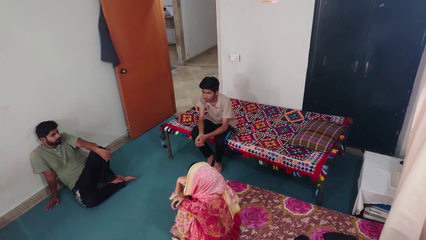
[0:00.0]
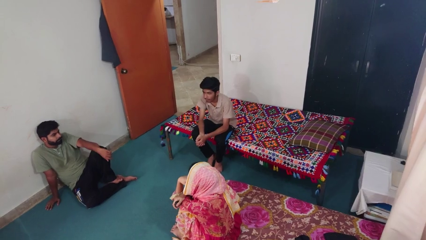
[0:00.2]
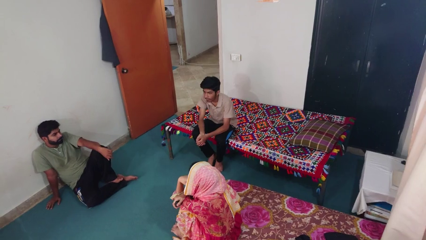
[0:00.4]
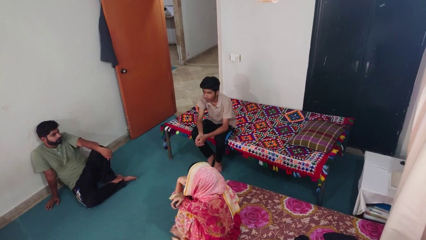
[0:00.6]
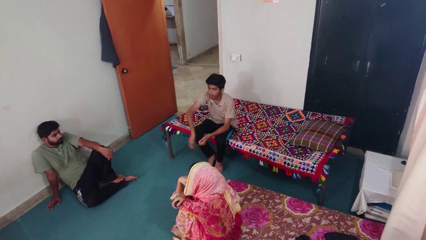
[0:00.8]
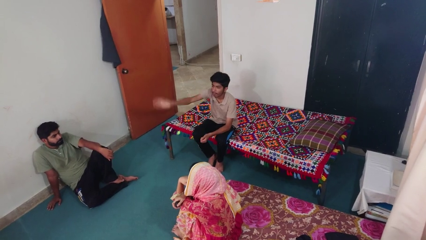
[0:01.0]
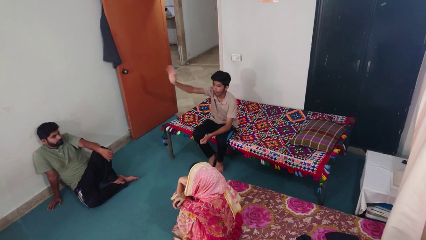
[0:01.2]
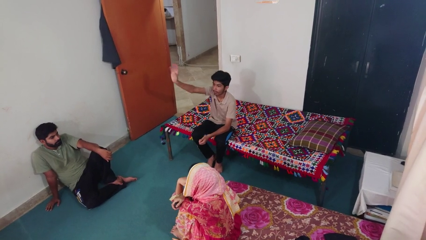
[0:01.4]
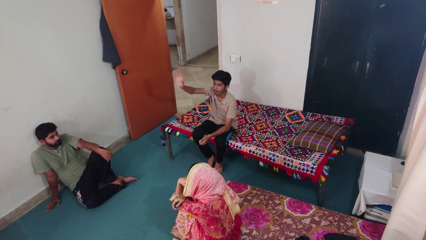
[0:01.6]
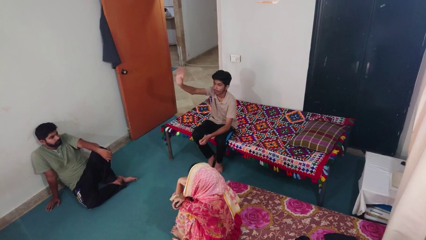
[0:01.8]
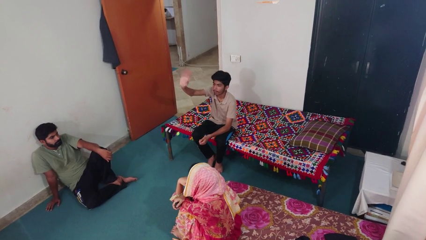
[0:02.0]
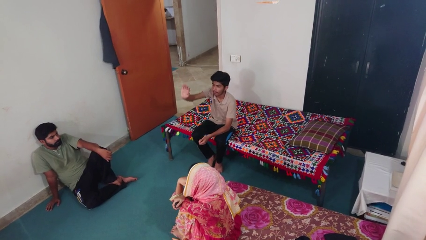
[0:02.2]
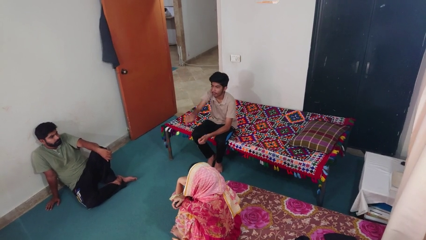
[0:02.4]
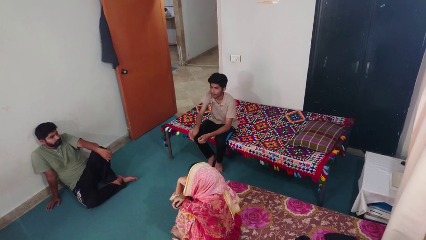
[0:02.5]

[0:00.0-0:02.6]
person waves at person

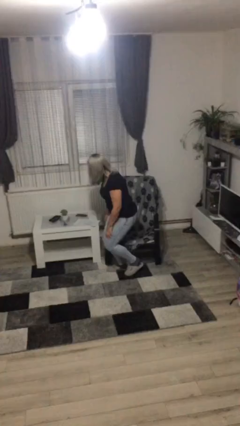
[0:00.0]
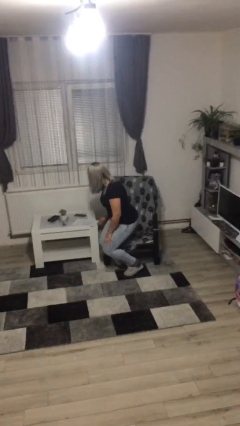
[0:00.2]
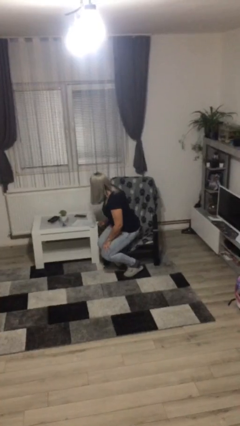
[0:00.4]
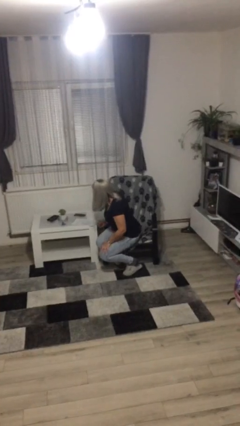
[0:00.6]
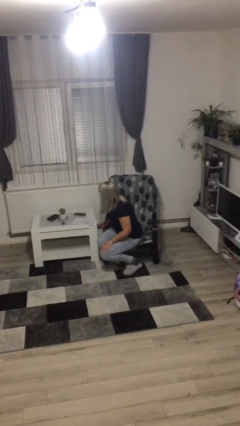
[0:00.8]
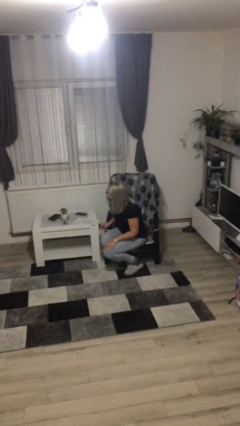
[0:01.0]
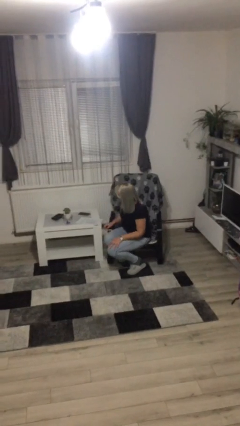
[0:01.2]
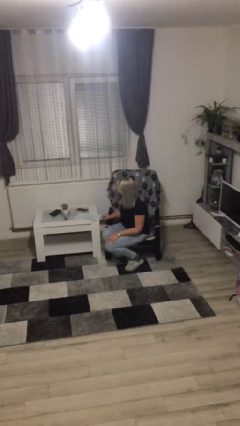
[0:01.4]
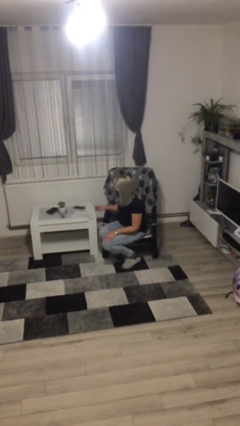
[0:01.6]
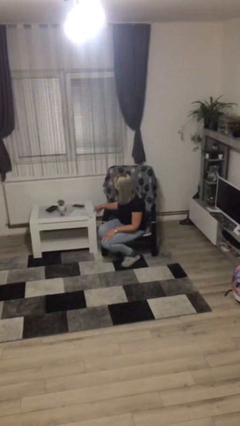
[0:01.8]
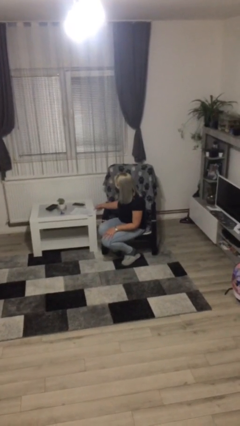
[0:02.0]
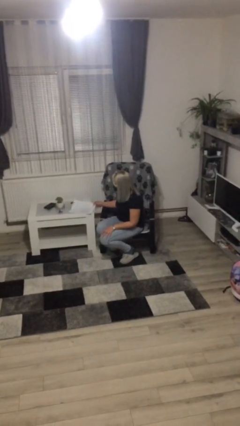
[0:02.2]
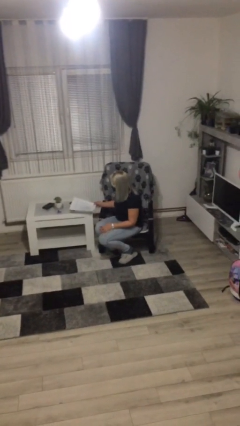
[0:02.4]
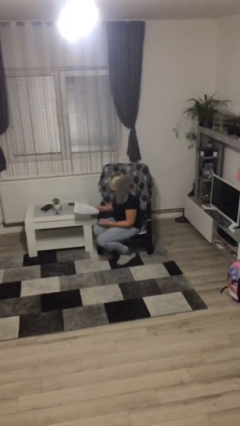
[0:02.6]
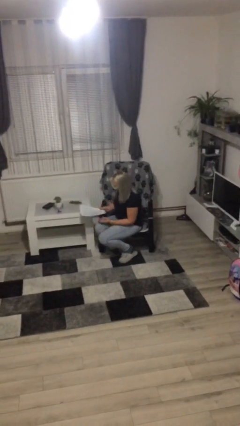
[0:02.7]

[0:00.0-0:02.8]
person sits down

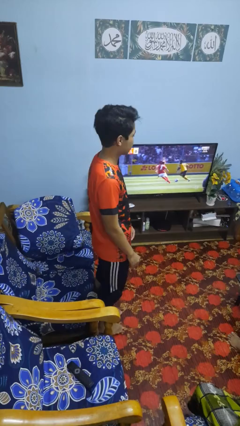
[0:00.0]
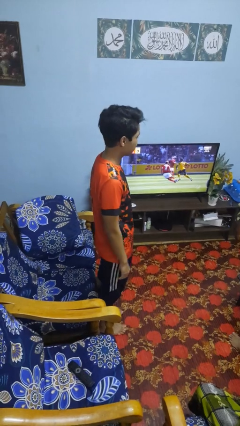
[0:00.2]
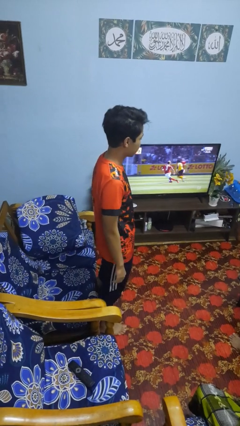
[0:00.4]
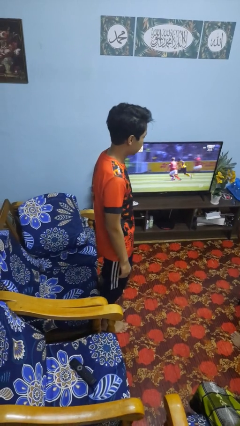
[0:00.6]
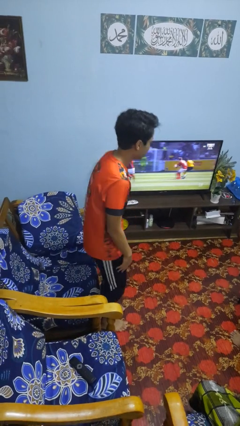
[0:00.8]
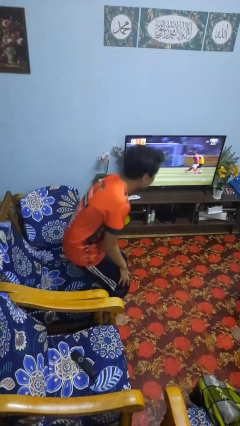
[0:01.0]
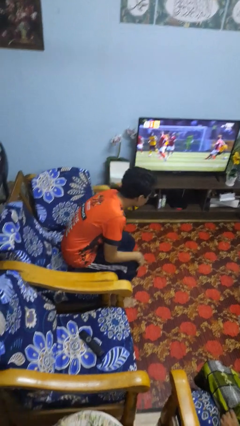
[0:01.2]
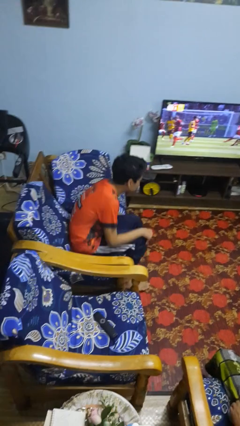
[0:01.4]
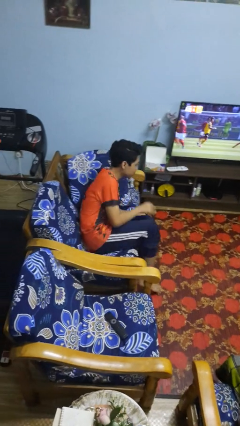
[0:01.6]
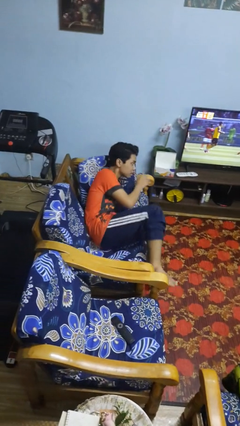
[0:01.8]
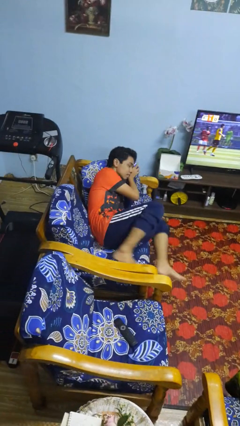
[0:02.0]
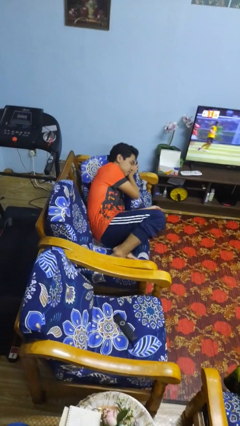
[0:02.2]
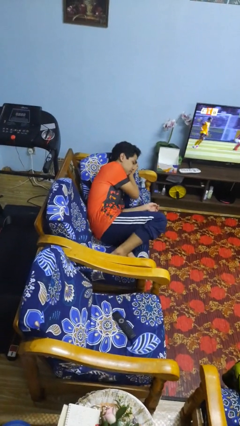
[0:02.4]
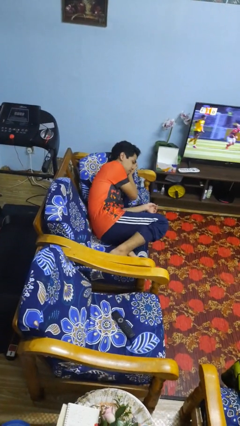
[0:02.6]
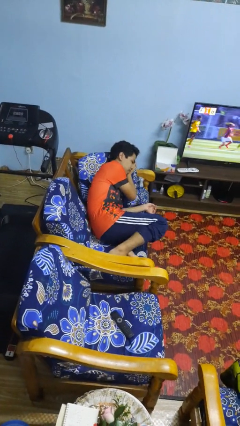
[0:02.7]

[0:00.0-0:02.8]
person lies down on couch

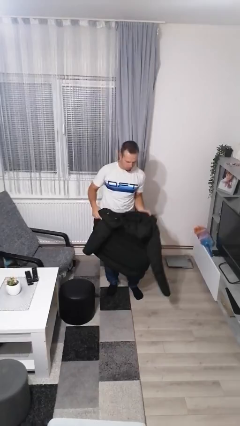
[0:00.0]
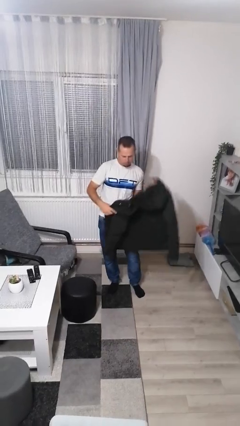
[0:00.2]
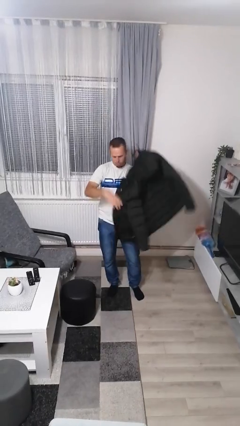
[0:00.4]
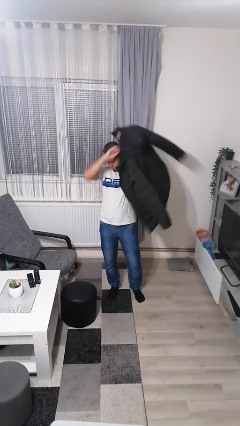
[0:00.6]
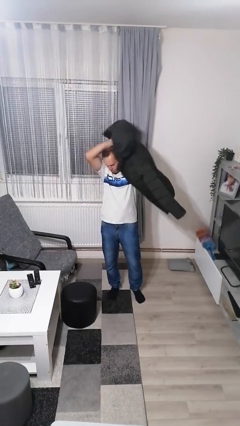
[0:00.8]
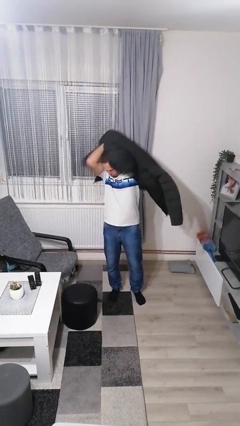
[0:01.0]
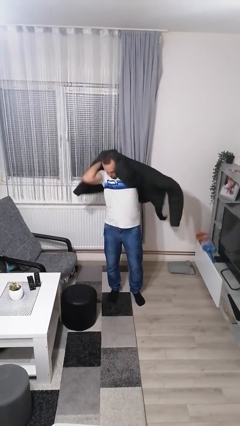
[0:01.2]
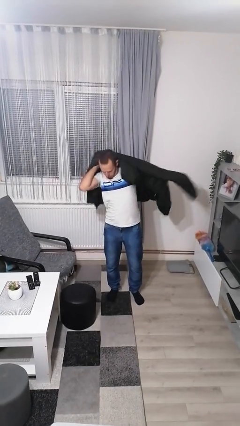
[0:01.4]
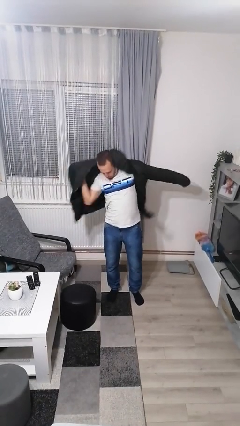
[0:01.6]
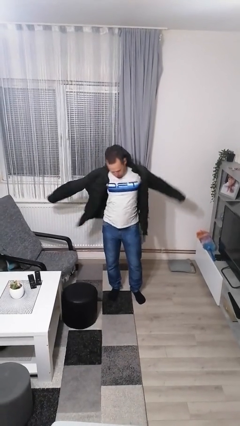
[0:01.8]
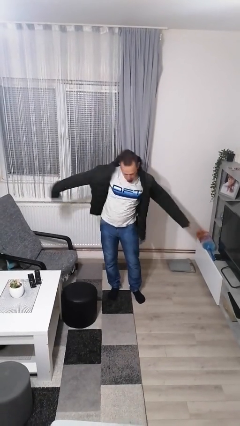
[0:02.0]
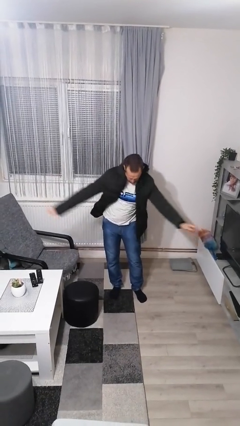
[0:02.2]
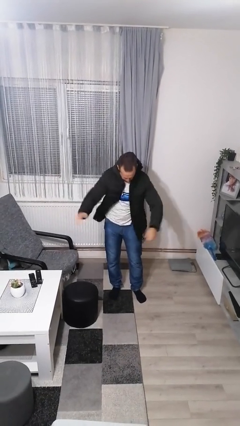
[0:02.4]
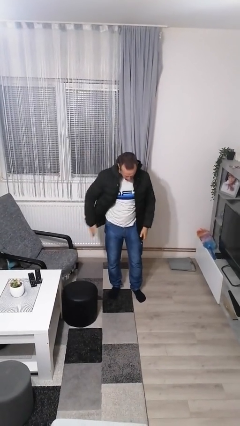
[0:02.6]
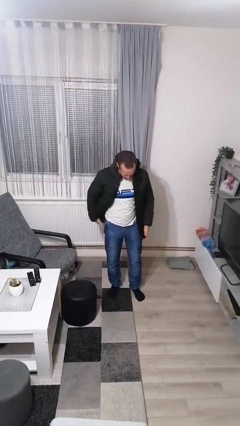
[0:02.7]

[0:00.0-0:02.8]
person puts on jacket

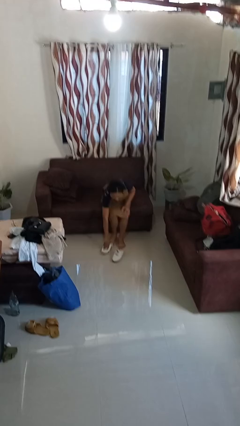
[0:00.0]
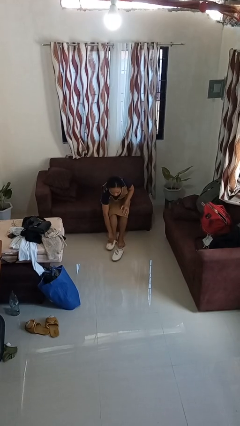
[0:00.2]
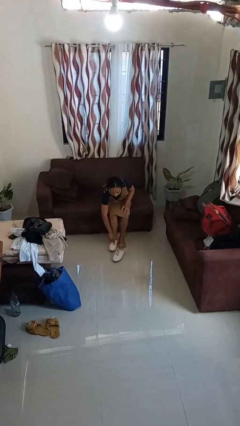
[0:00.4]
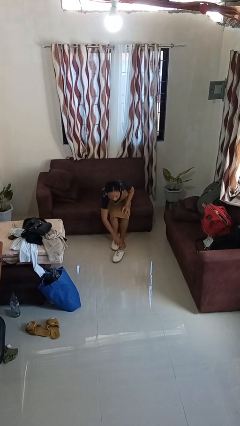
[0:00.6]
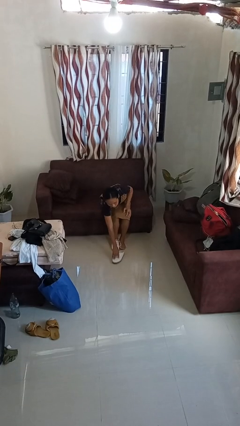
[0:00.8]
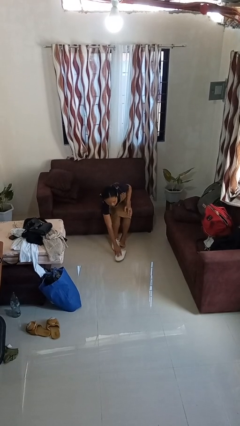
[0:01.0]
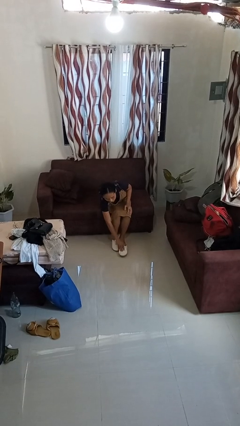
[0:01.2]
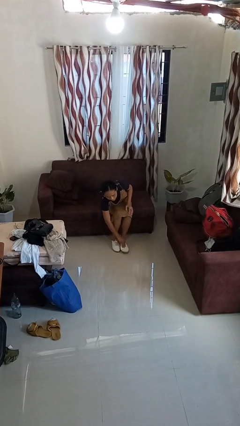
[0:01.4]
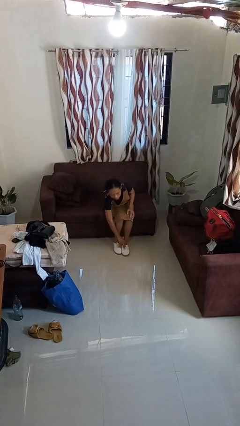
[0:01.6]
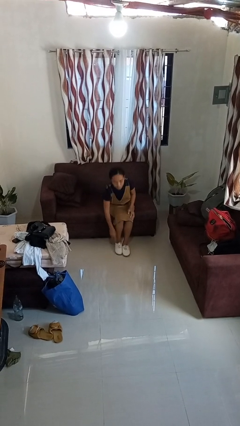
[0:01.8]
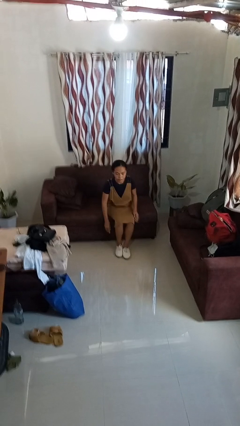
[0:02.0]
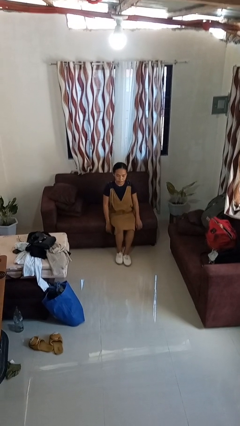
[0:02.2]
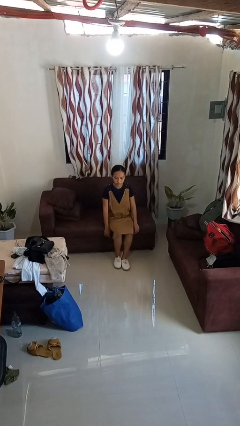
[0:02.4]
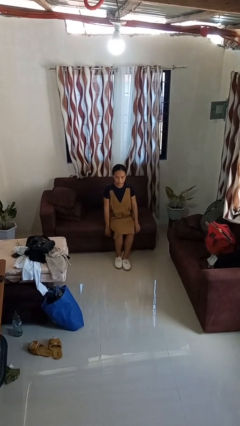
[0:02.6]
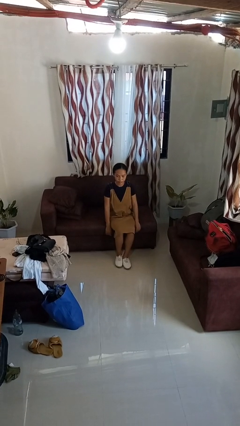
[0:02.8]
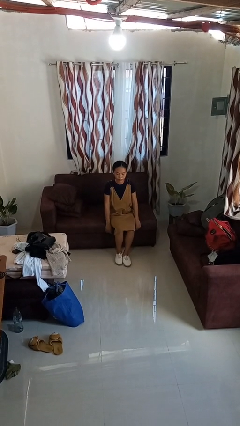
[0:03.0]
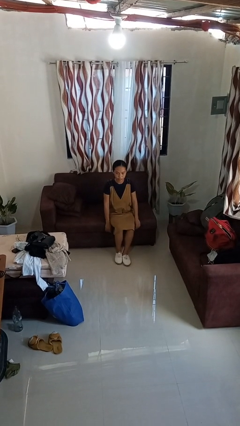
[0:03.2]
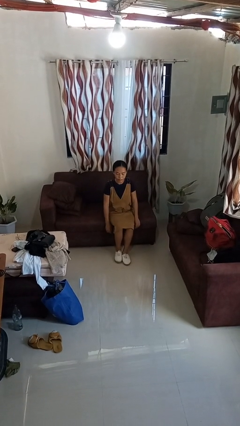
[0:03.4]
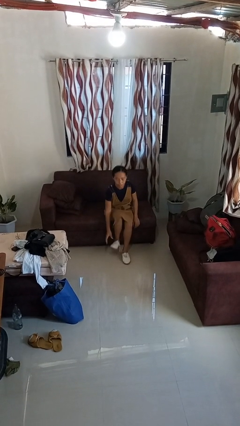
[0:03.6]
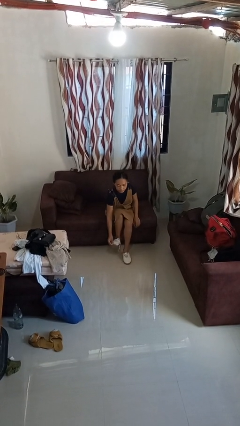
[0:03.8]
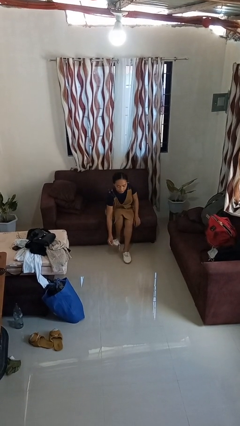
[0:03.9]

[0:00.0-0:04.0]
person puts on shoes

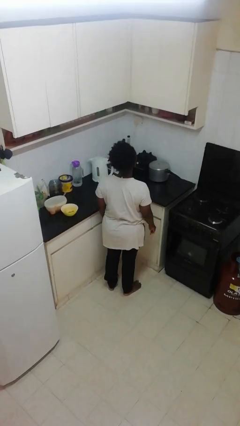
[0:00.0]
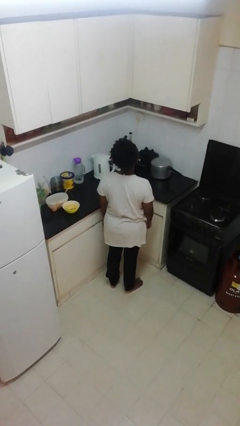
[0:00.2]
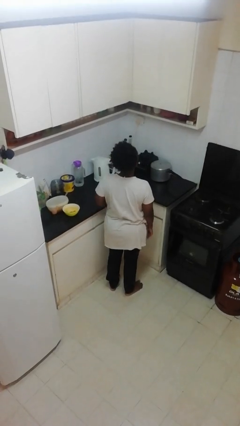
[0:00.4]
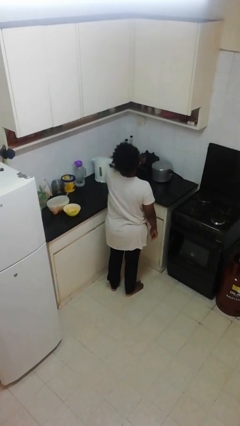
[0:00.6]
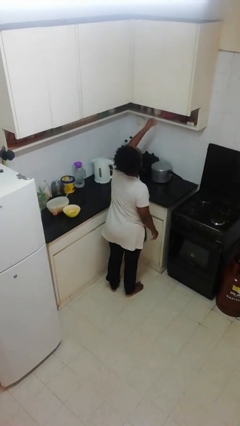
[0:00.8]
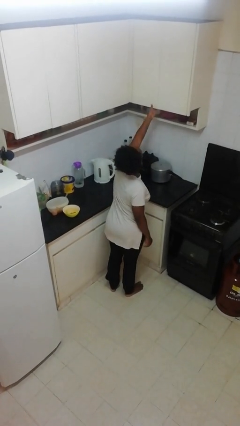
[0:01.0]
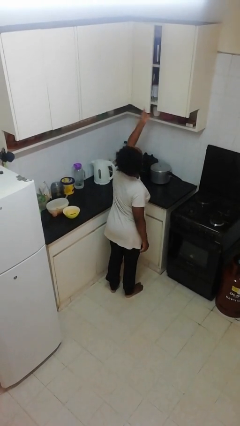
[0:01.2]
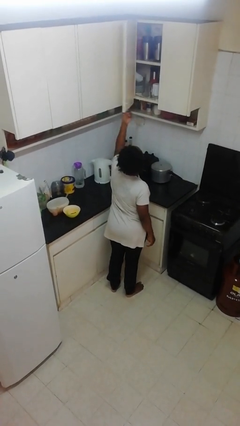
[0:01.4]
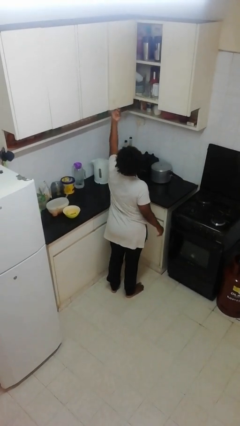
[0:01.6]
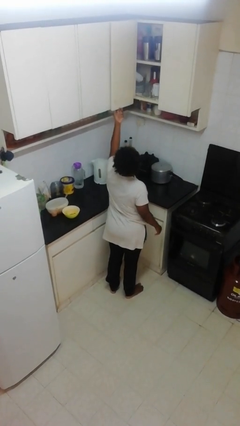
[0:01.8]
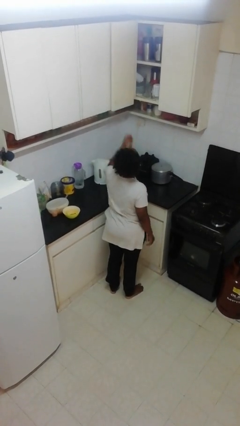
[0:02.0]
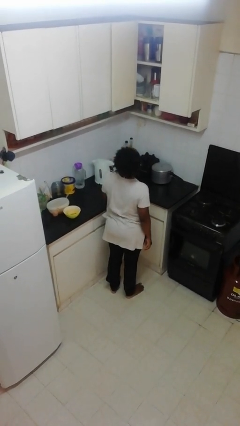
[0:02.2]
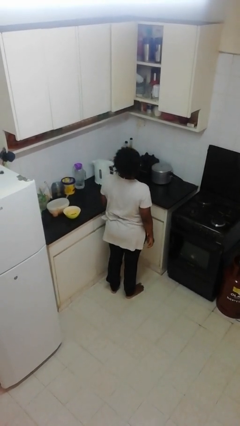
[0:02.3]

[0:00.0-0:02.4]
person opens cabinet
